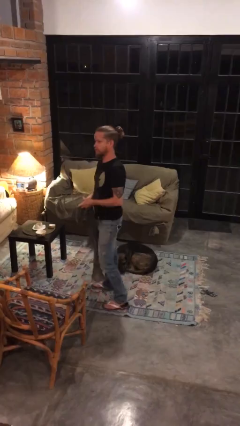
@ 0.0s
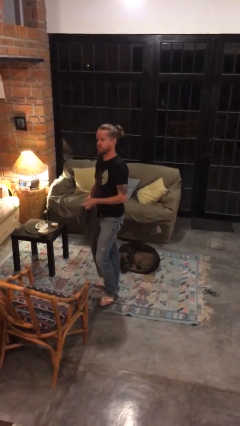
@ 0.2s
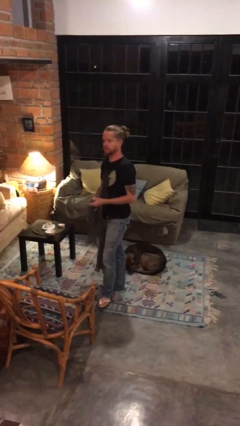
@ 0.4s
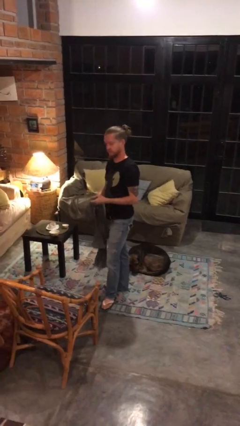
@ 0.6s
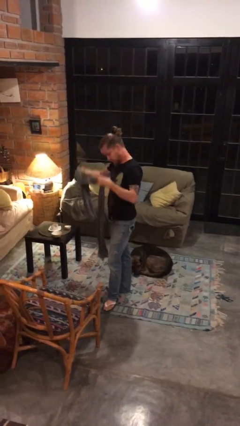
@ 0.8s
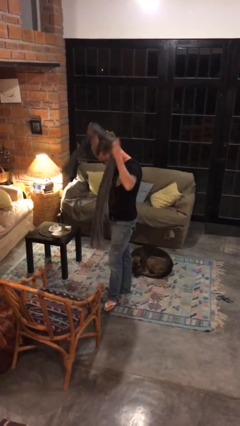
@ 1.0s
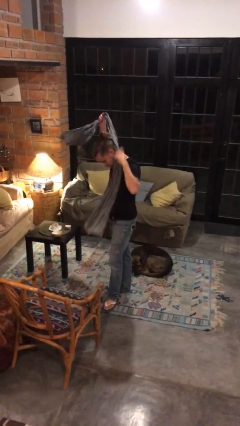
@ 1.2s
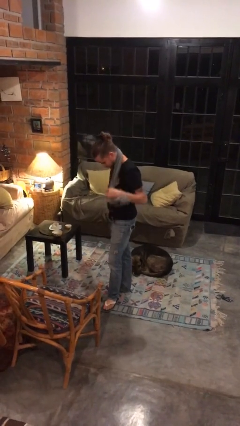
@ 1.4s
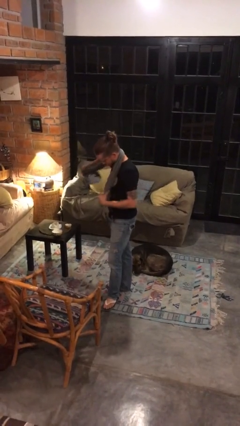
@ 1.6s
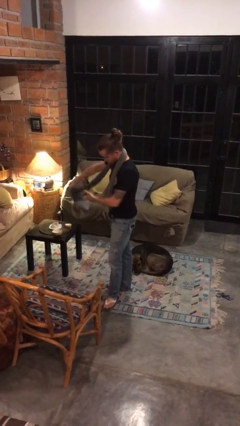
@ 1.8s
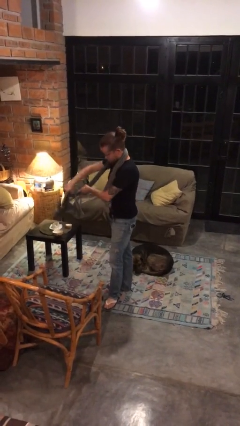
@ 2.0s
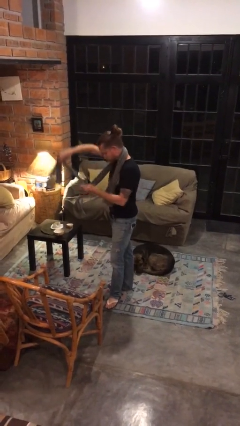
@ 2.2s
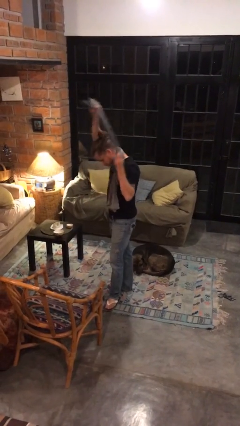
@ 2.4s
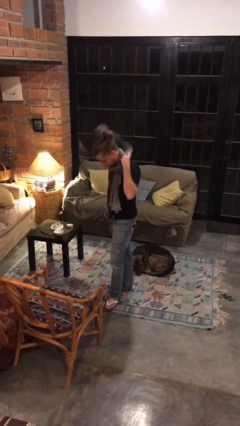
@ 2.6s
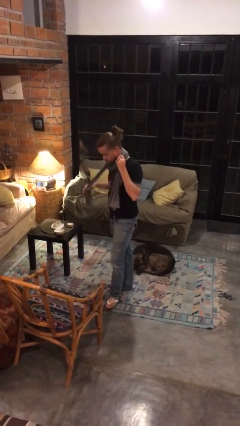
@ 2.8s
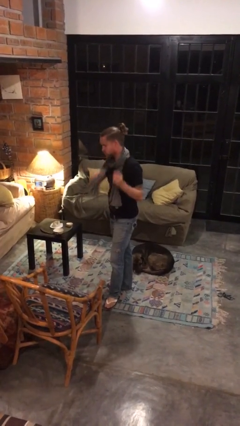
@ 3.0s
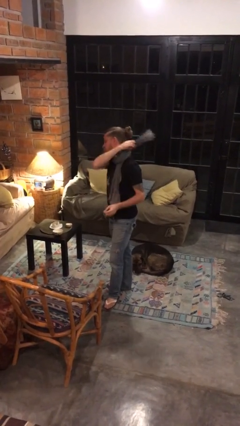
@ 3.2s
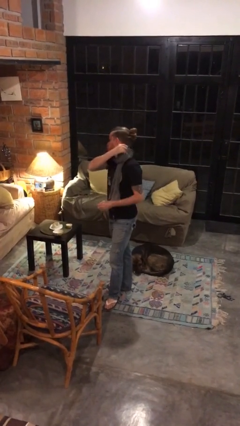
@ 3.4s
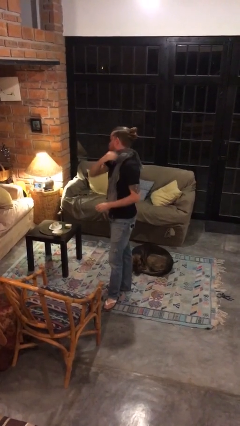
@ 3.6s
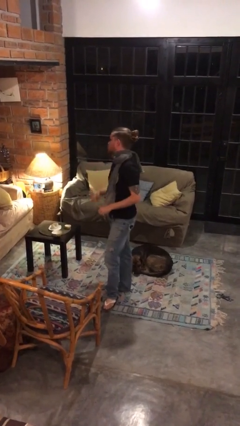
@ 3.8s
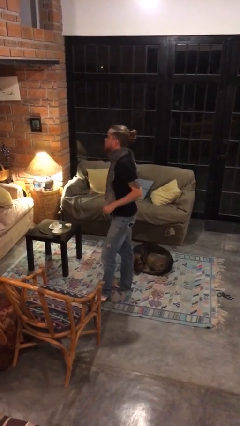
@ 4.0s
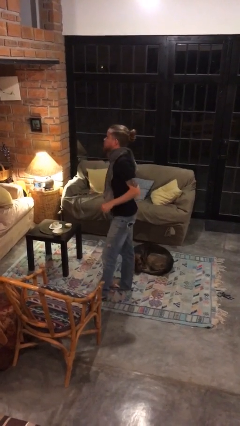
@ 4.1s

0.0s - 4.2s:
person puts on scarf

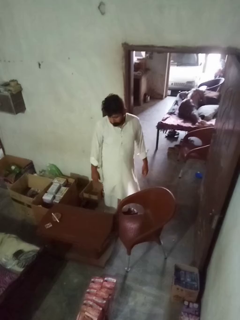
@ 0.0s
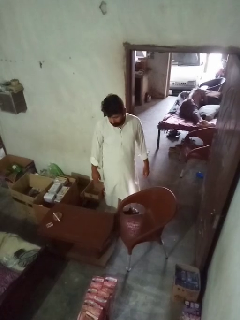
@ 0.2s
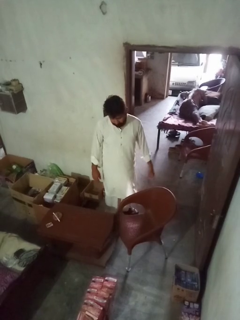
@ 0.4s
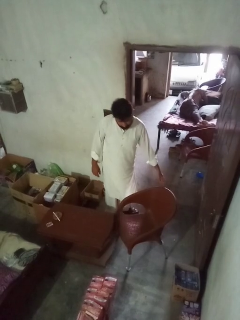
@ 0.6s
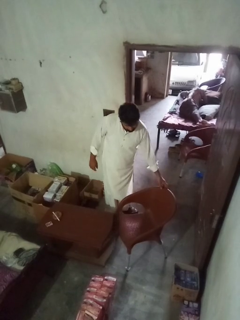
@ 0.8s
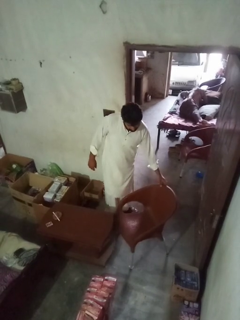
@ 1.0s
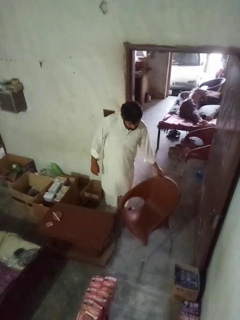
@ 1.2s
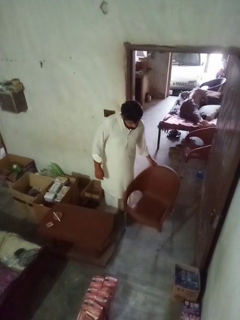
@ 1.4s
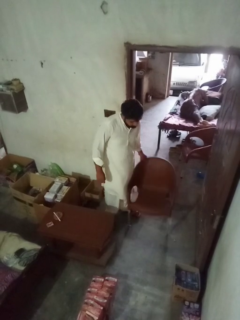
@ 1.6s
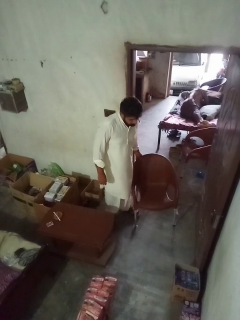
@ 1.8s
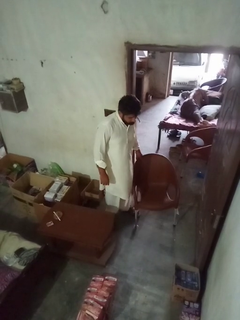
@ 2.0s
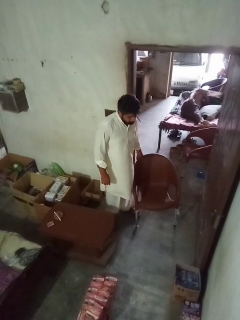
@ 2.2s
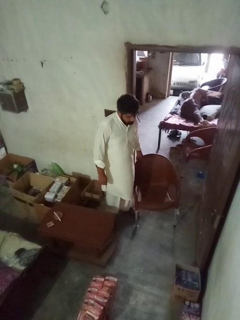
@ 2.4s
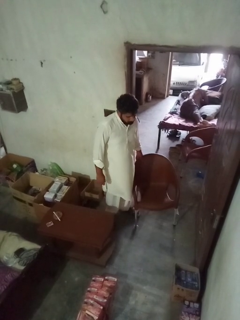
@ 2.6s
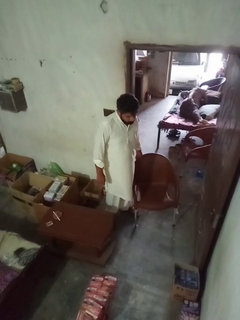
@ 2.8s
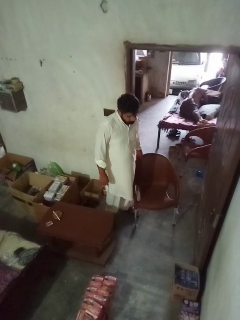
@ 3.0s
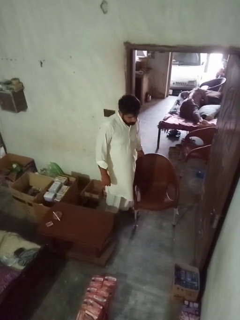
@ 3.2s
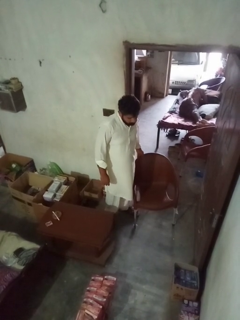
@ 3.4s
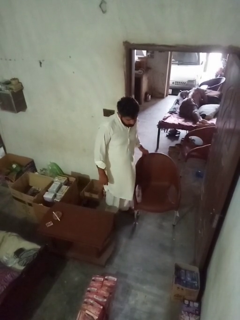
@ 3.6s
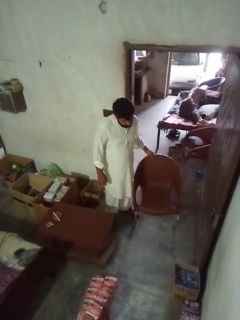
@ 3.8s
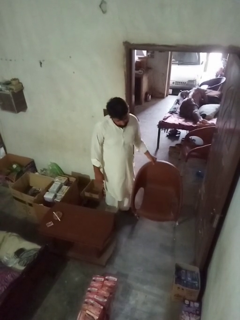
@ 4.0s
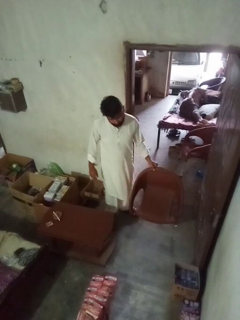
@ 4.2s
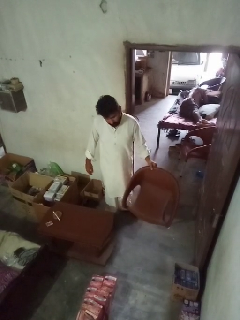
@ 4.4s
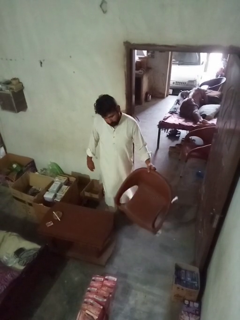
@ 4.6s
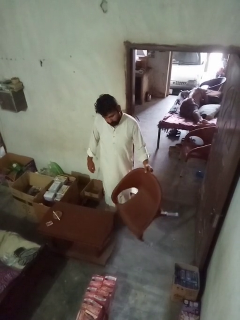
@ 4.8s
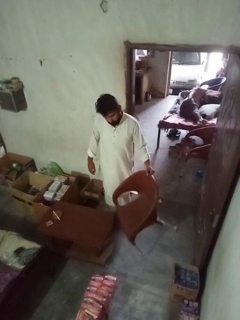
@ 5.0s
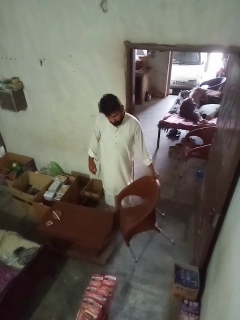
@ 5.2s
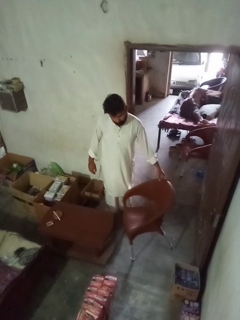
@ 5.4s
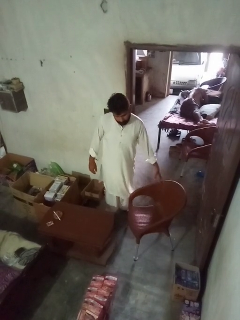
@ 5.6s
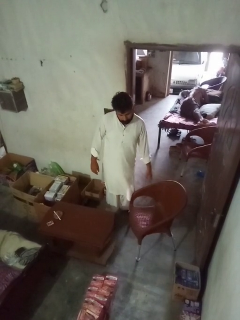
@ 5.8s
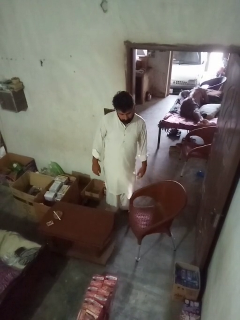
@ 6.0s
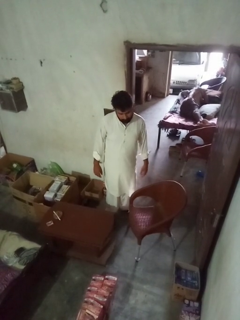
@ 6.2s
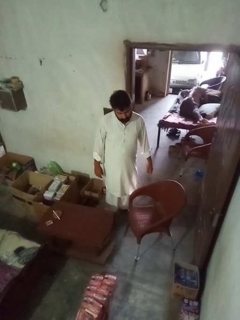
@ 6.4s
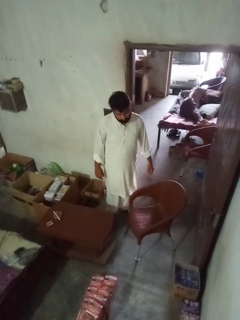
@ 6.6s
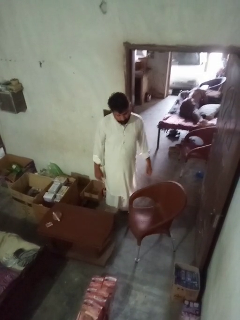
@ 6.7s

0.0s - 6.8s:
person pushes in chair

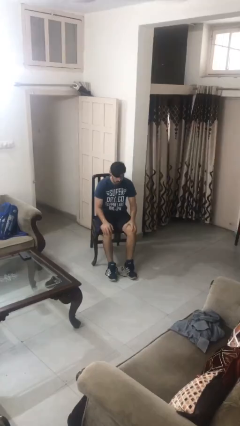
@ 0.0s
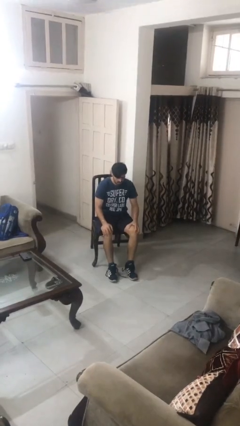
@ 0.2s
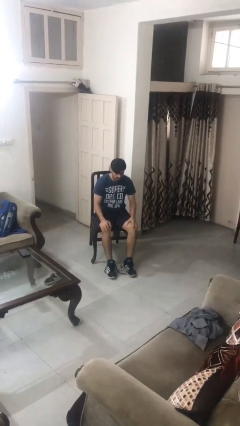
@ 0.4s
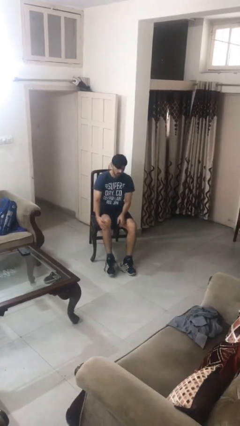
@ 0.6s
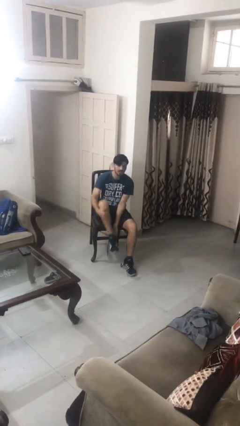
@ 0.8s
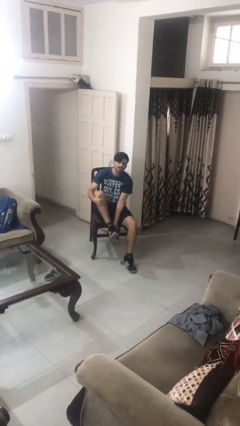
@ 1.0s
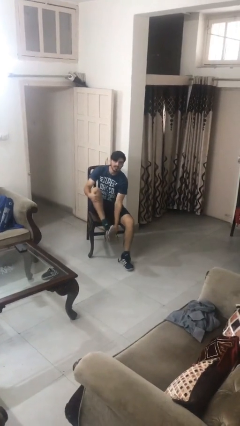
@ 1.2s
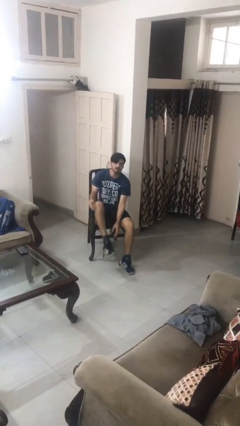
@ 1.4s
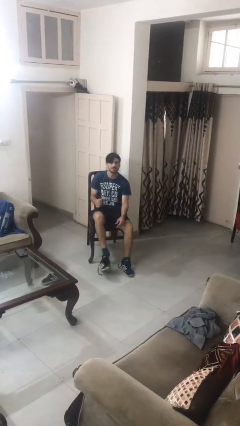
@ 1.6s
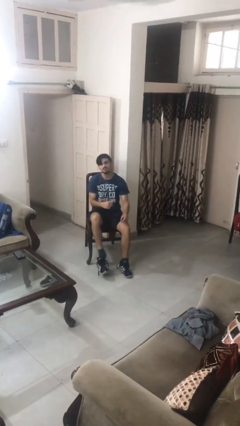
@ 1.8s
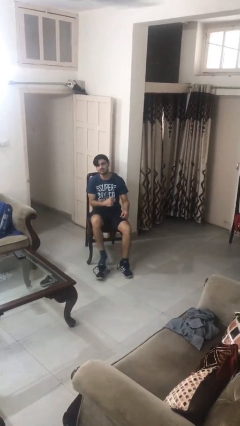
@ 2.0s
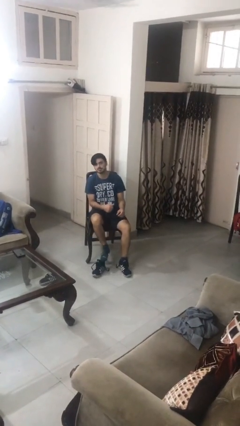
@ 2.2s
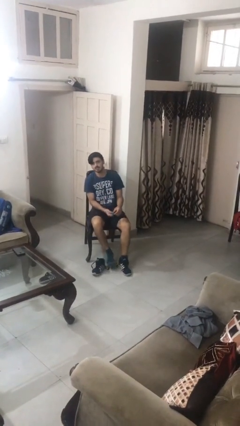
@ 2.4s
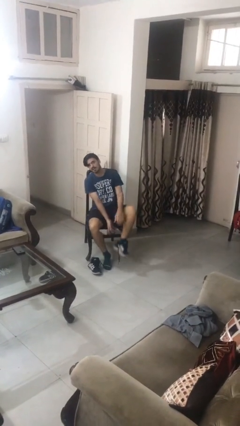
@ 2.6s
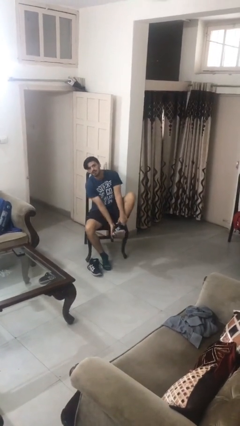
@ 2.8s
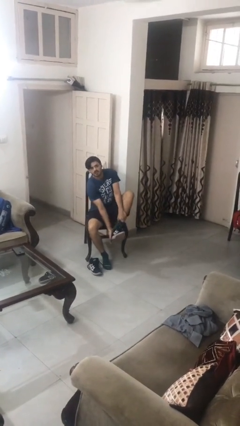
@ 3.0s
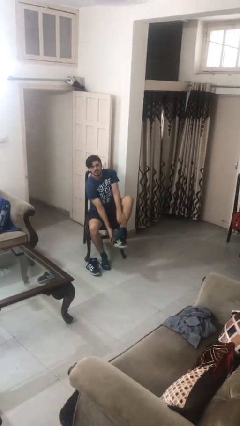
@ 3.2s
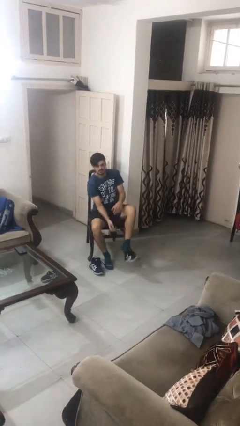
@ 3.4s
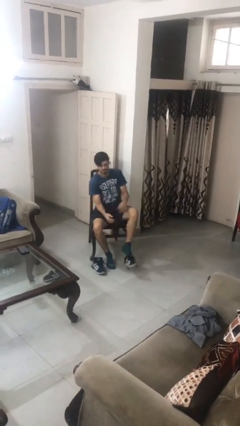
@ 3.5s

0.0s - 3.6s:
person takes off shoes

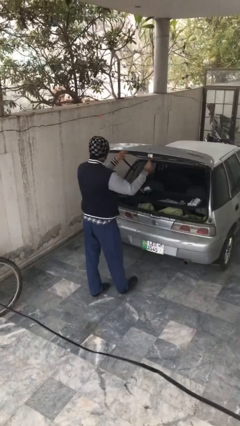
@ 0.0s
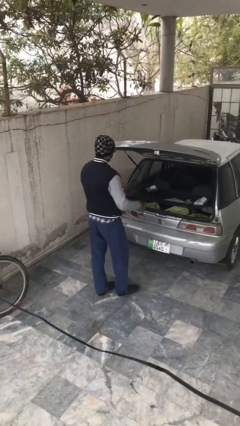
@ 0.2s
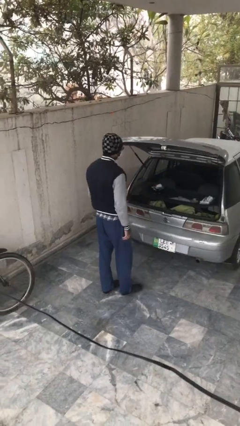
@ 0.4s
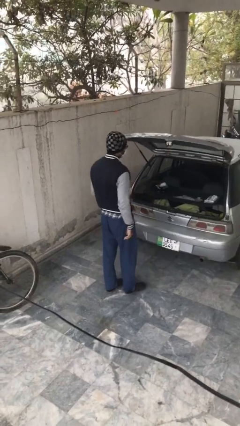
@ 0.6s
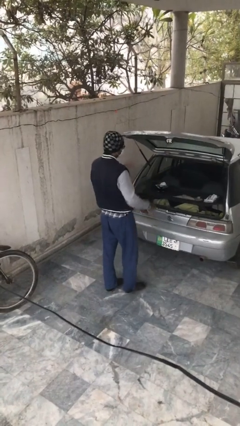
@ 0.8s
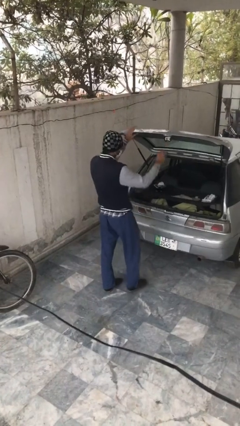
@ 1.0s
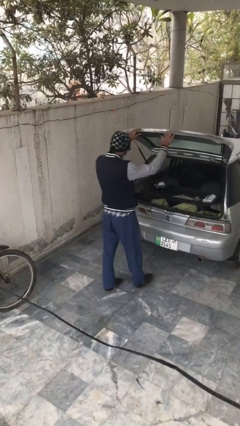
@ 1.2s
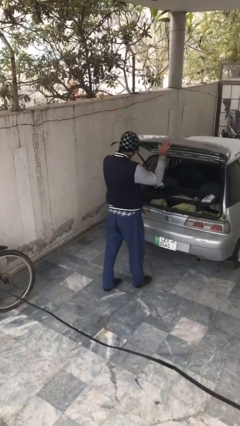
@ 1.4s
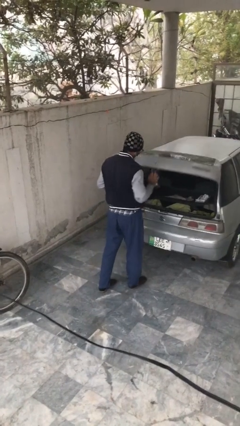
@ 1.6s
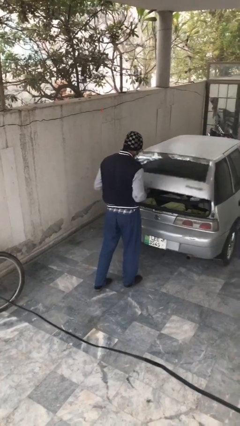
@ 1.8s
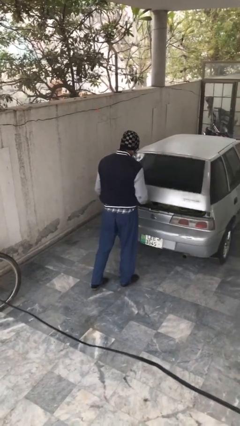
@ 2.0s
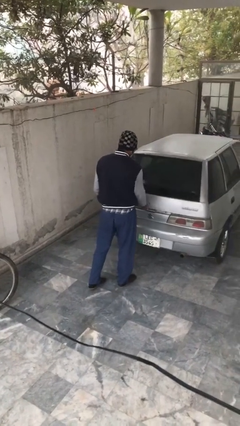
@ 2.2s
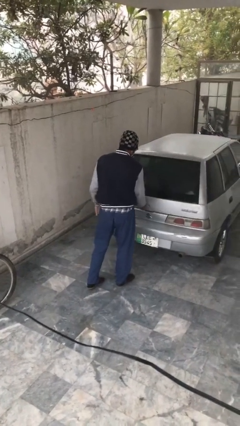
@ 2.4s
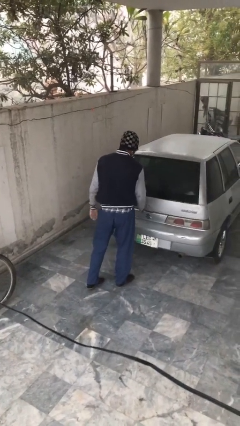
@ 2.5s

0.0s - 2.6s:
person closes car trunk

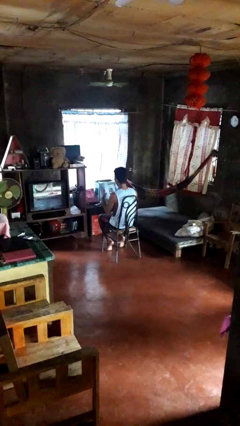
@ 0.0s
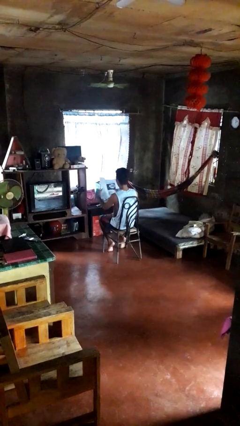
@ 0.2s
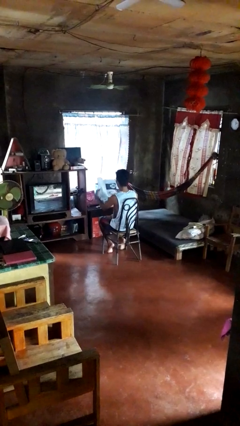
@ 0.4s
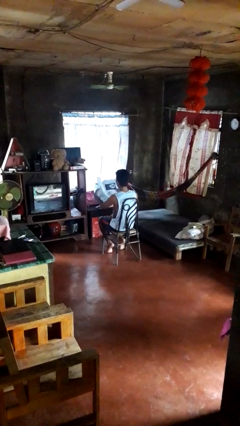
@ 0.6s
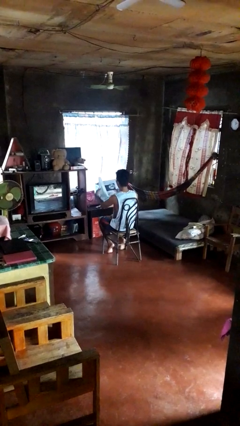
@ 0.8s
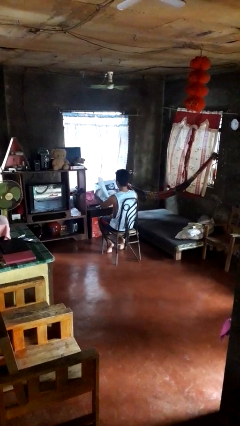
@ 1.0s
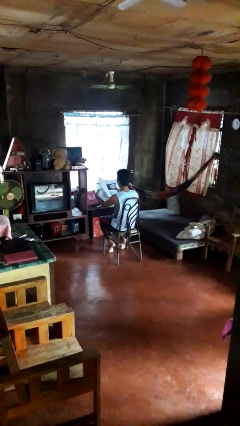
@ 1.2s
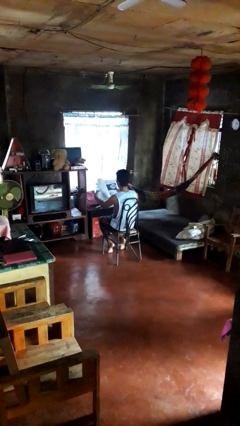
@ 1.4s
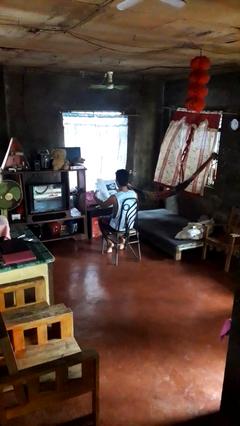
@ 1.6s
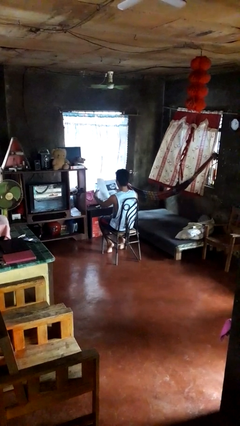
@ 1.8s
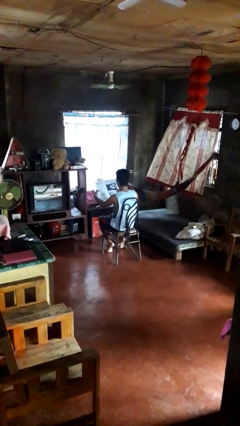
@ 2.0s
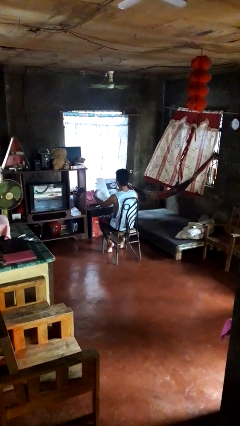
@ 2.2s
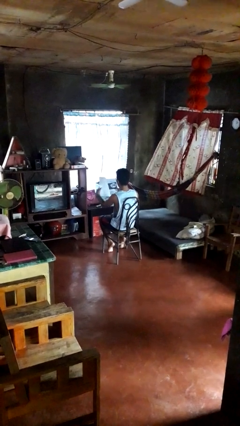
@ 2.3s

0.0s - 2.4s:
person reads newspaper
